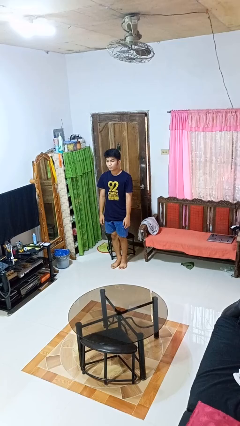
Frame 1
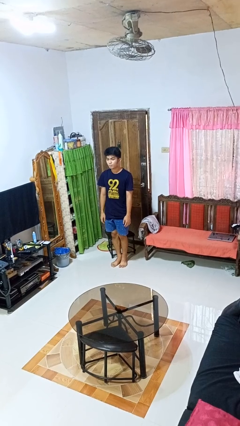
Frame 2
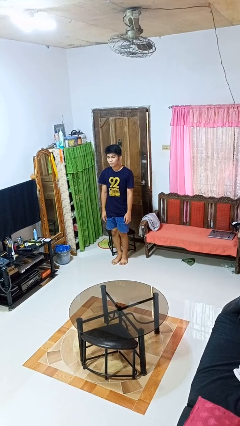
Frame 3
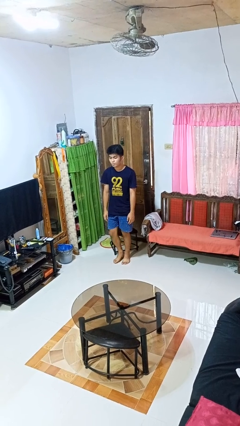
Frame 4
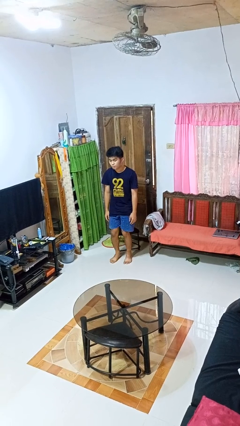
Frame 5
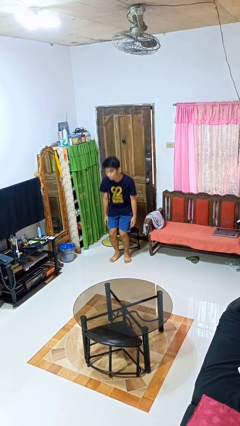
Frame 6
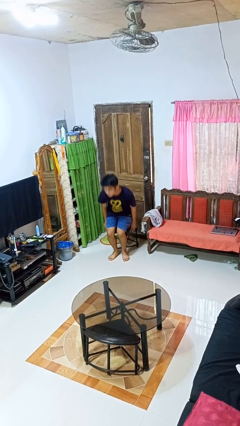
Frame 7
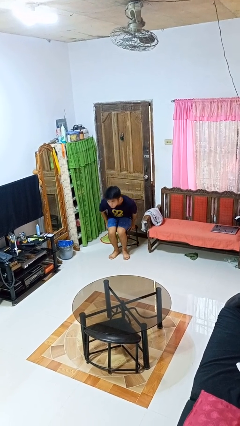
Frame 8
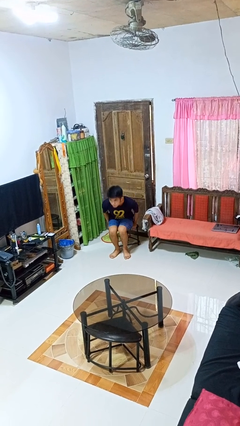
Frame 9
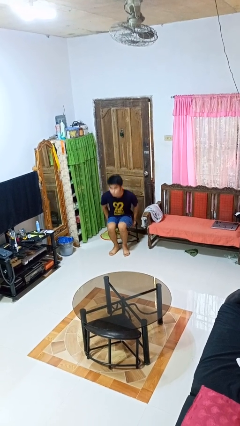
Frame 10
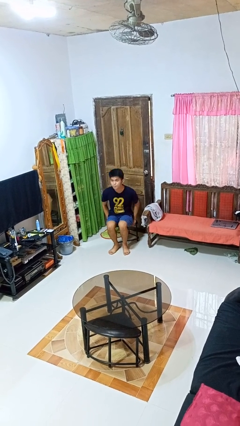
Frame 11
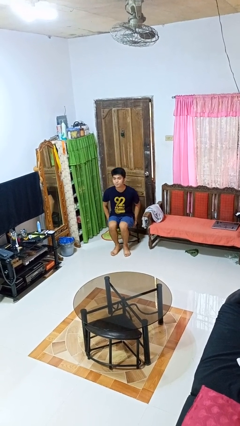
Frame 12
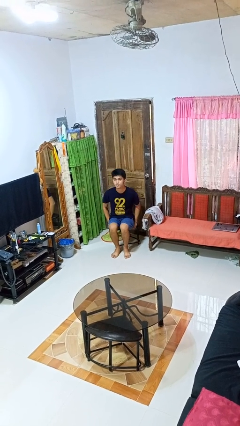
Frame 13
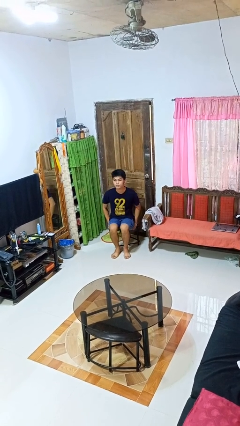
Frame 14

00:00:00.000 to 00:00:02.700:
person sits down

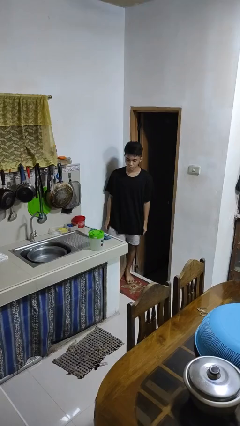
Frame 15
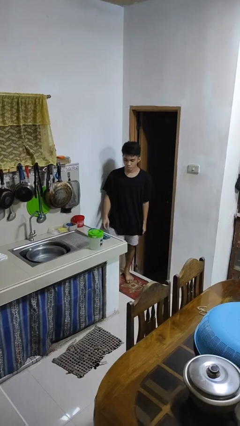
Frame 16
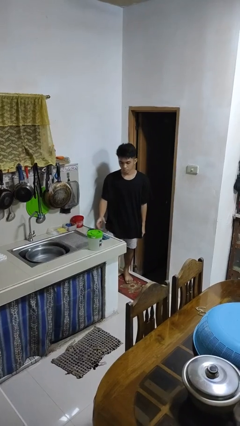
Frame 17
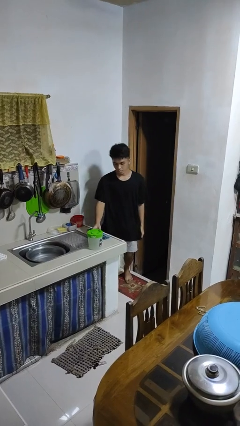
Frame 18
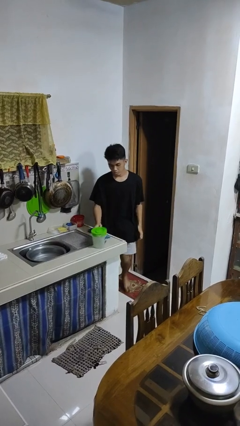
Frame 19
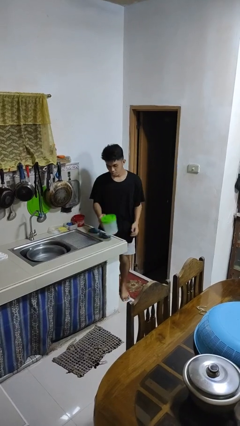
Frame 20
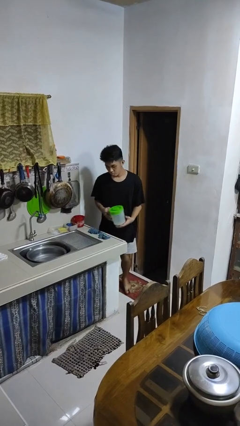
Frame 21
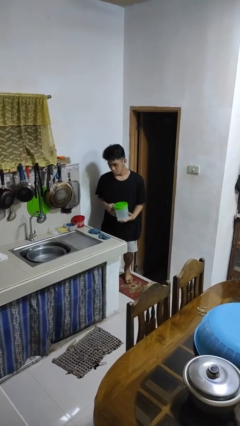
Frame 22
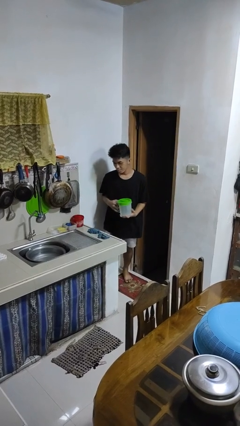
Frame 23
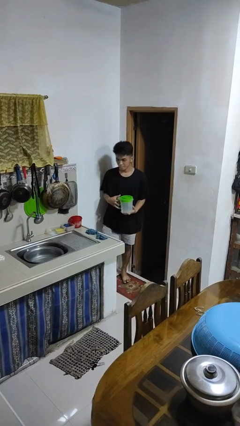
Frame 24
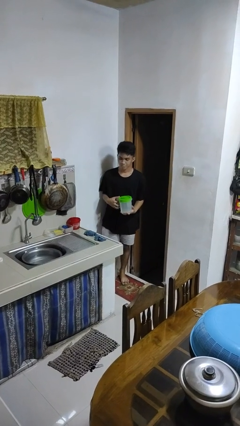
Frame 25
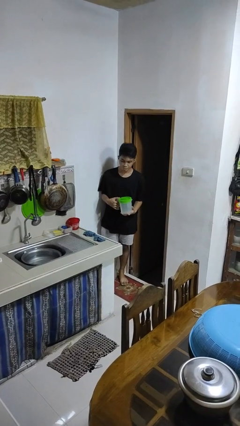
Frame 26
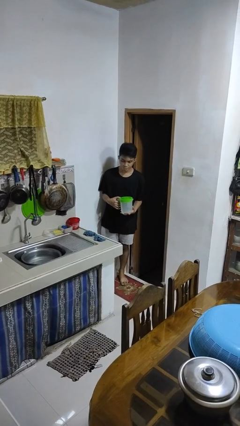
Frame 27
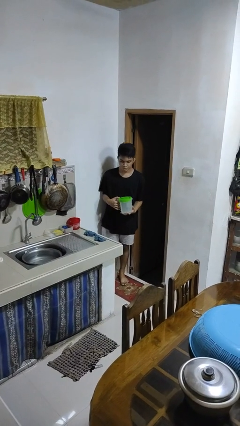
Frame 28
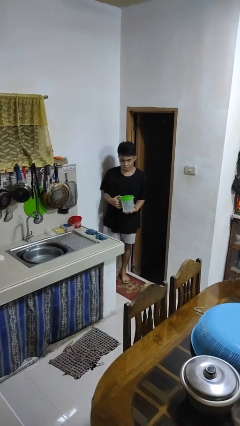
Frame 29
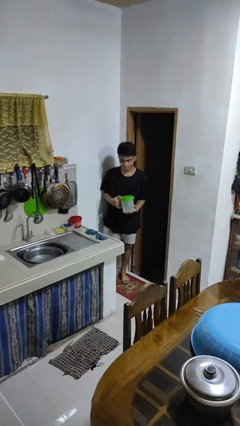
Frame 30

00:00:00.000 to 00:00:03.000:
person picks up object from countertop

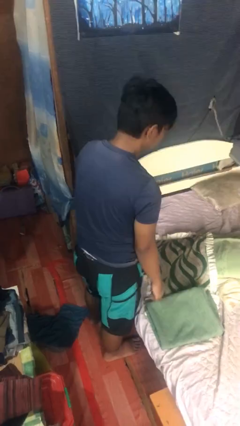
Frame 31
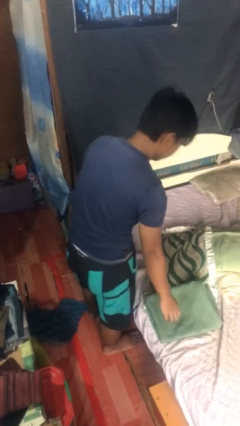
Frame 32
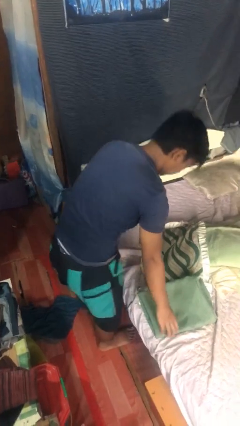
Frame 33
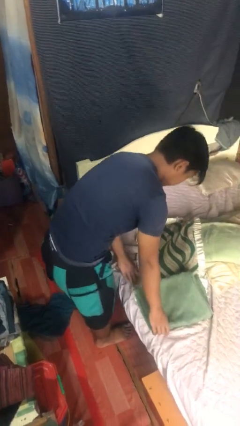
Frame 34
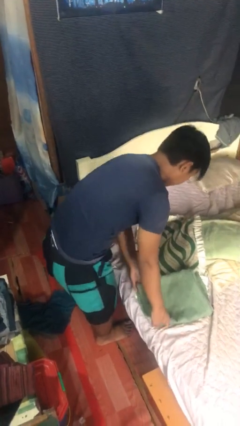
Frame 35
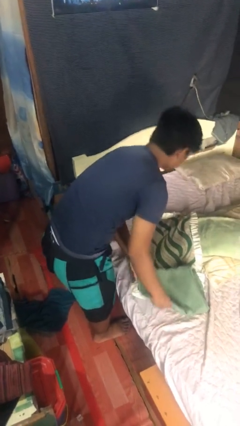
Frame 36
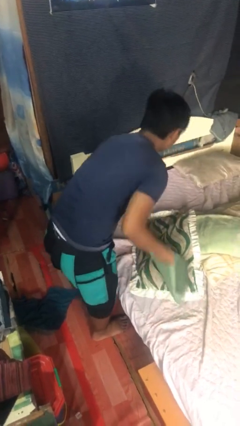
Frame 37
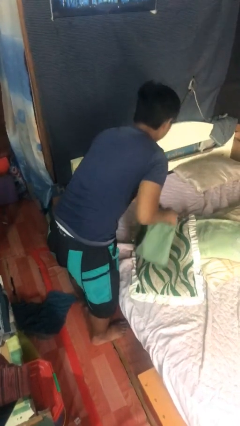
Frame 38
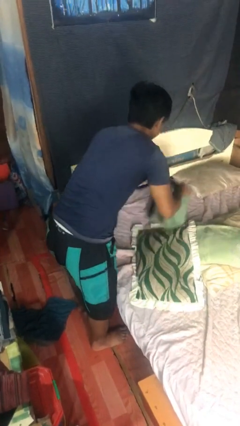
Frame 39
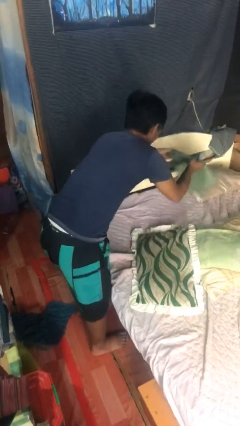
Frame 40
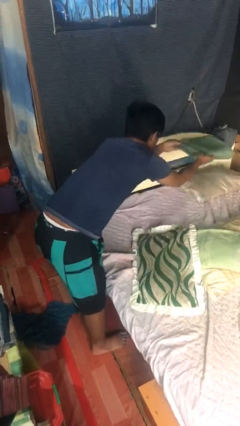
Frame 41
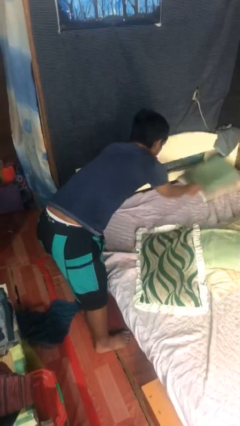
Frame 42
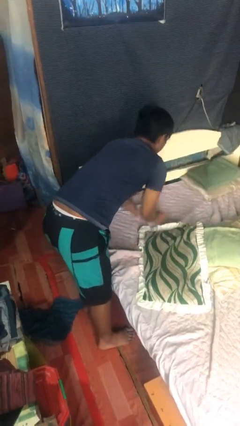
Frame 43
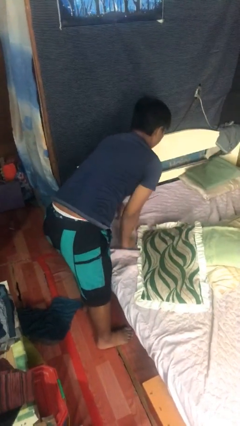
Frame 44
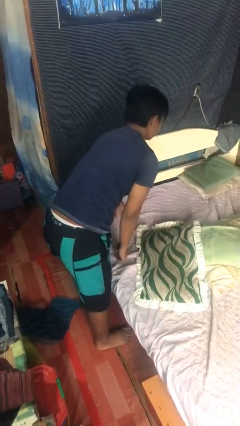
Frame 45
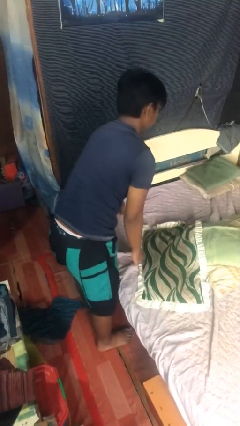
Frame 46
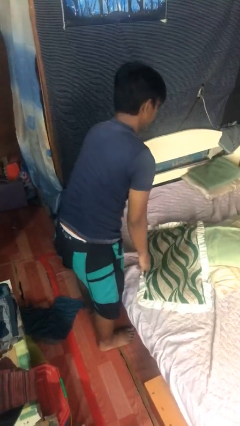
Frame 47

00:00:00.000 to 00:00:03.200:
person makes bed

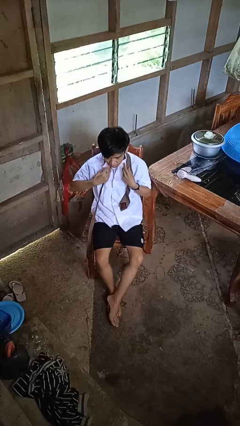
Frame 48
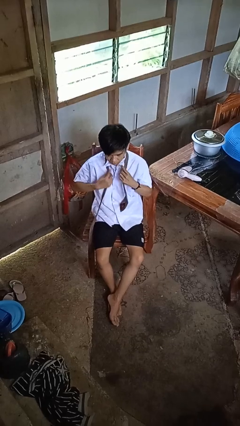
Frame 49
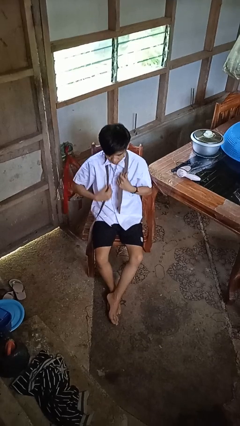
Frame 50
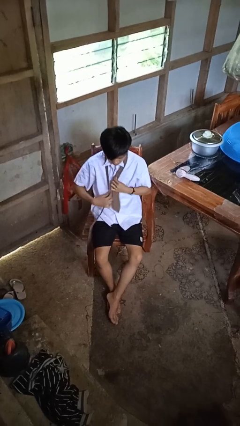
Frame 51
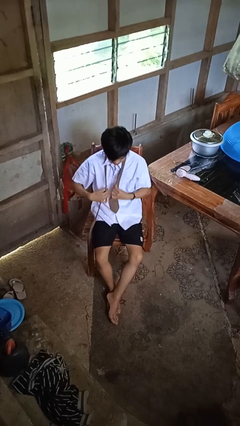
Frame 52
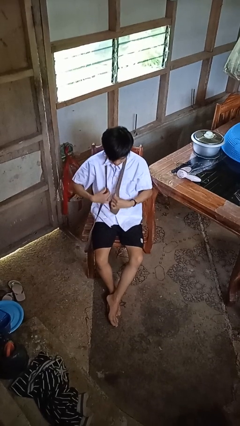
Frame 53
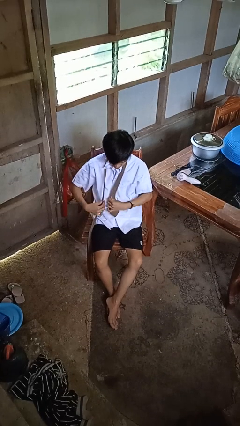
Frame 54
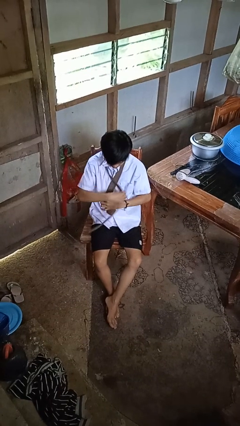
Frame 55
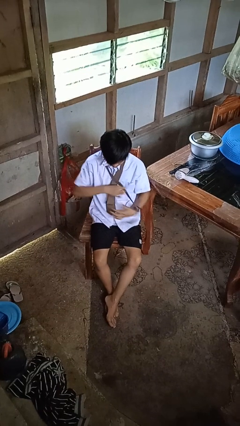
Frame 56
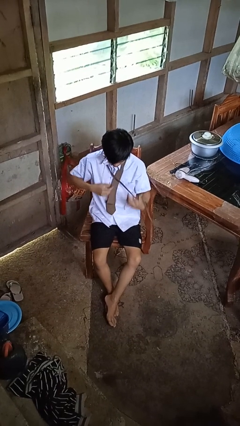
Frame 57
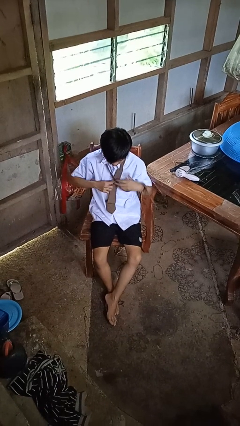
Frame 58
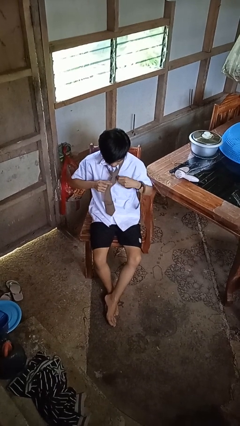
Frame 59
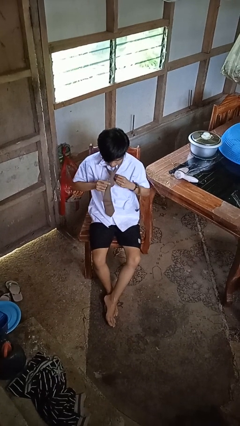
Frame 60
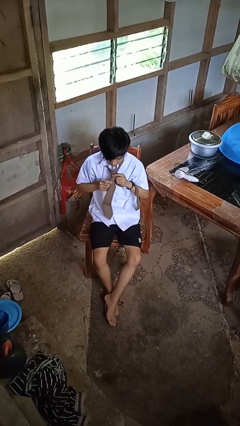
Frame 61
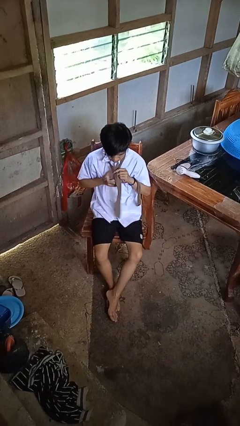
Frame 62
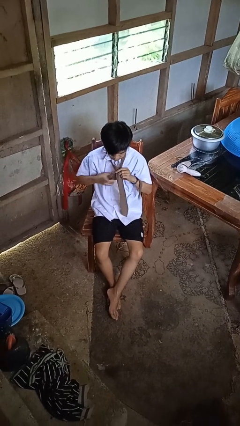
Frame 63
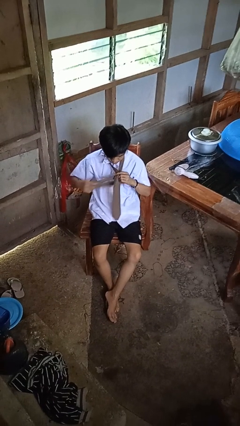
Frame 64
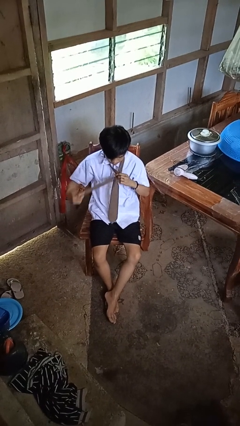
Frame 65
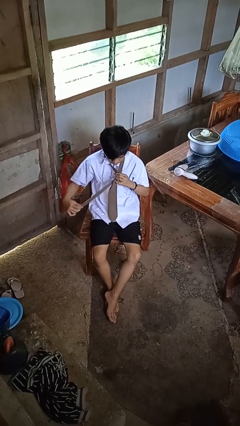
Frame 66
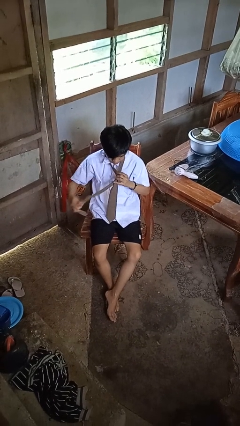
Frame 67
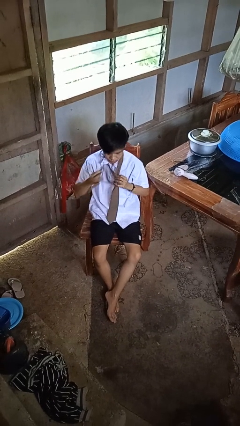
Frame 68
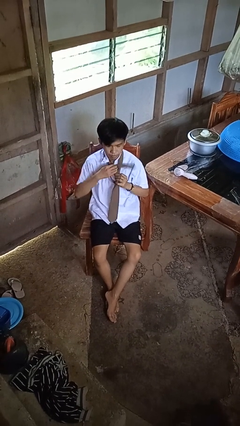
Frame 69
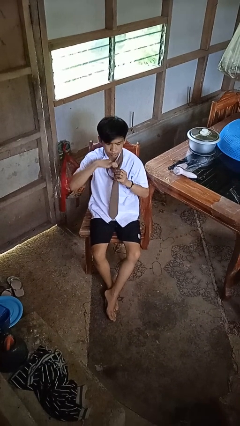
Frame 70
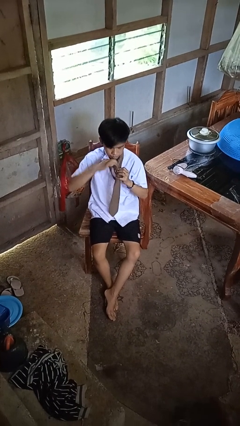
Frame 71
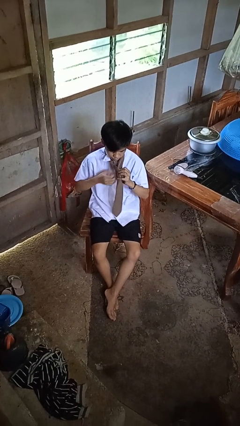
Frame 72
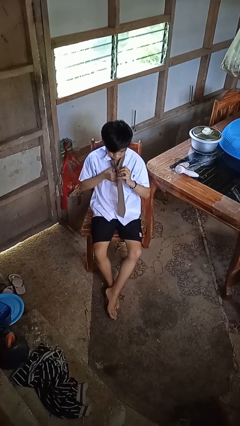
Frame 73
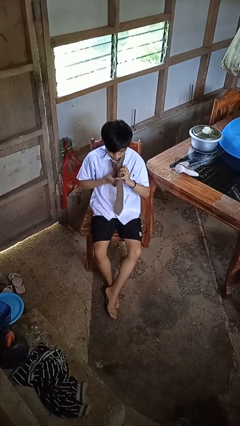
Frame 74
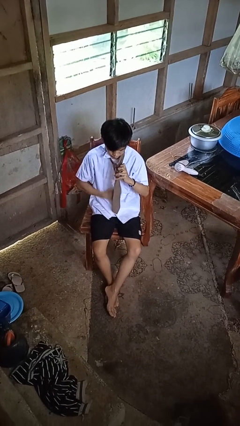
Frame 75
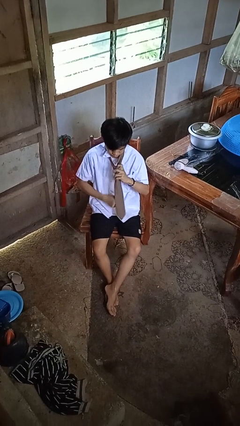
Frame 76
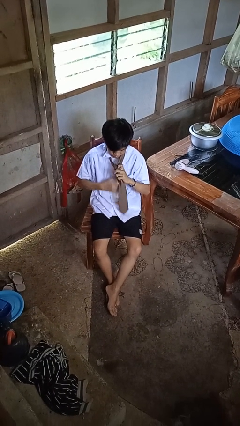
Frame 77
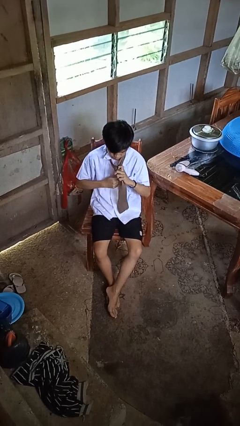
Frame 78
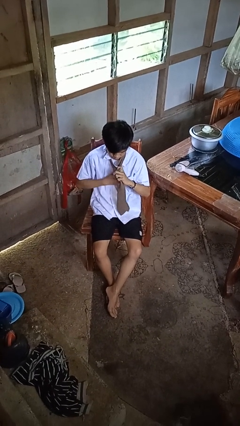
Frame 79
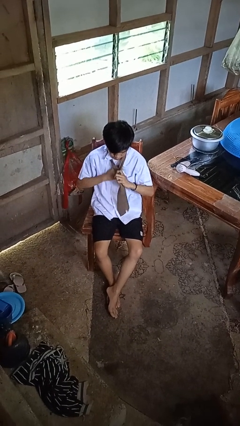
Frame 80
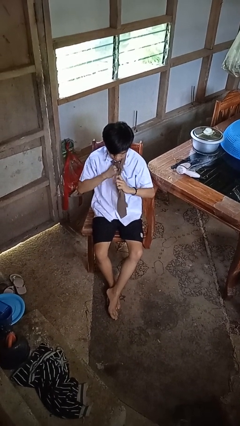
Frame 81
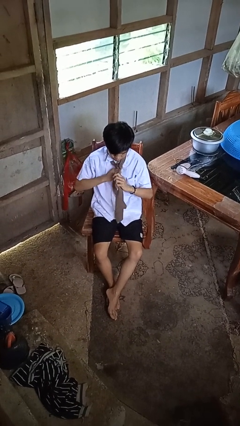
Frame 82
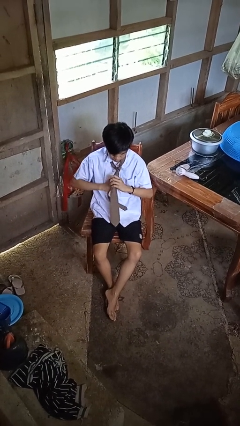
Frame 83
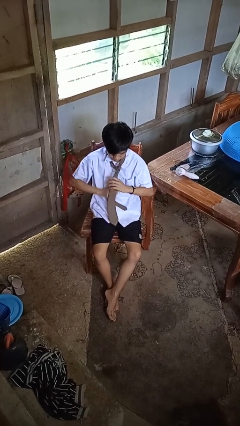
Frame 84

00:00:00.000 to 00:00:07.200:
person puts on necktie

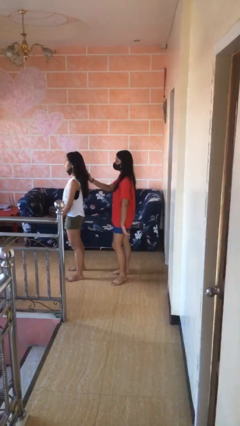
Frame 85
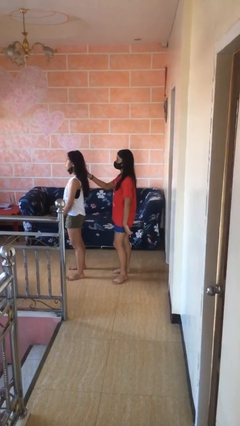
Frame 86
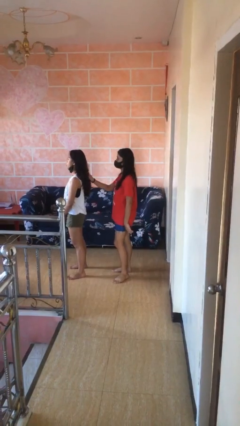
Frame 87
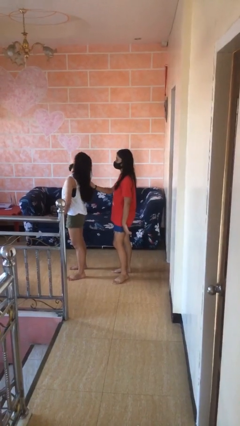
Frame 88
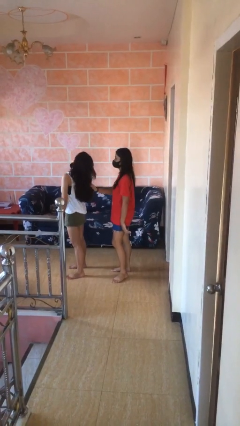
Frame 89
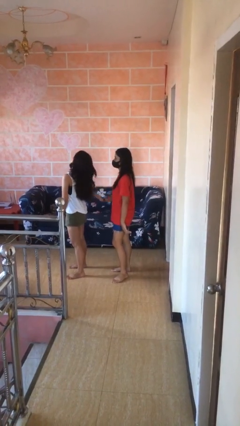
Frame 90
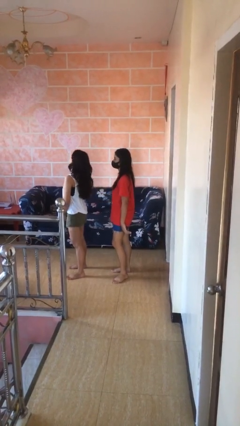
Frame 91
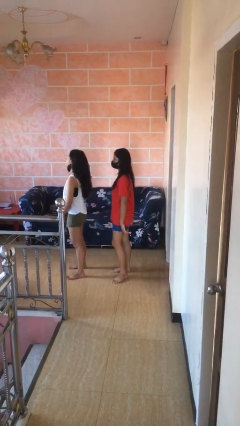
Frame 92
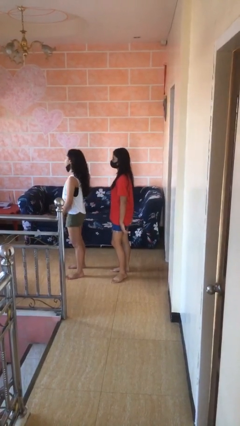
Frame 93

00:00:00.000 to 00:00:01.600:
person grabs person by hair
